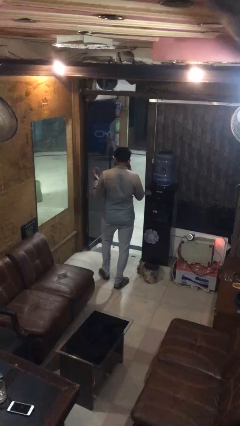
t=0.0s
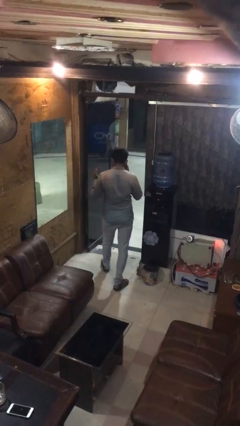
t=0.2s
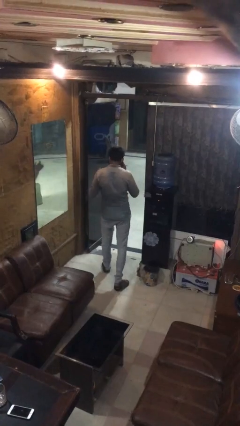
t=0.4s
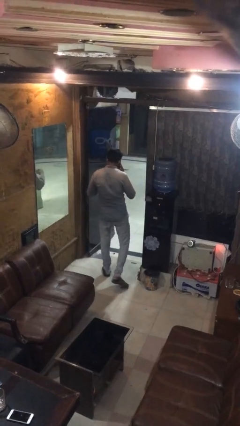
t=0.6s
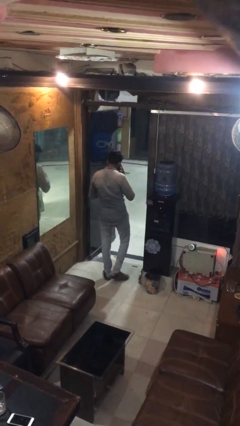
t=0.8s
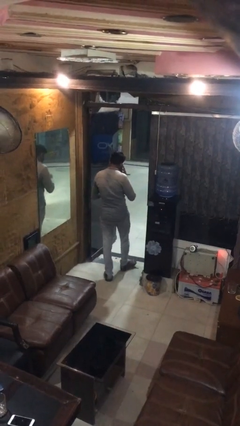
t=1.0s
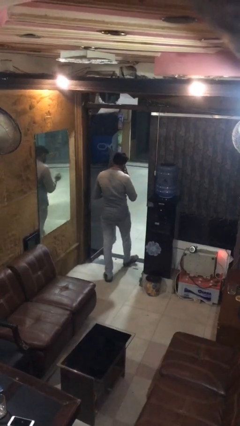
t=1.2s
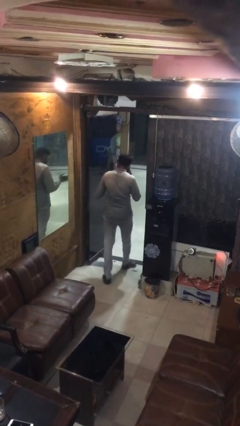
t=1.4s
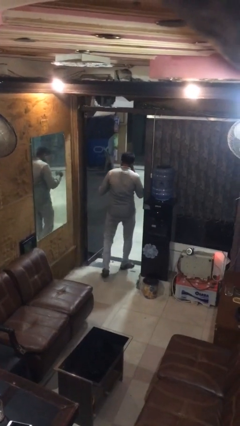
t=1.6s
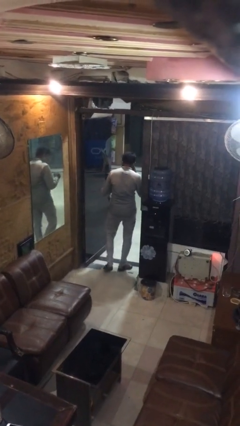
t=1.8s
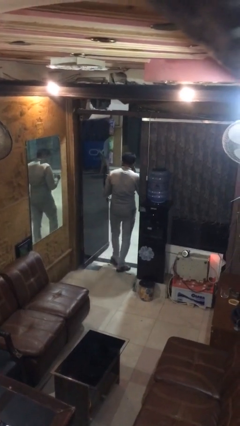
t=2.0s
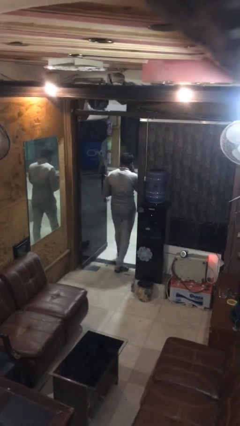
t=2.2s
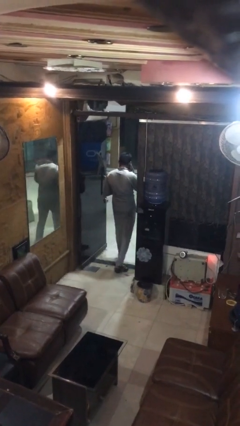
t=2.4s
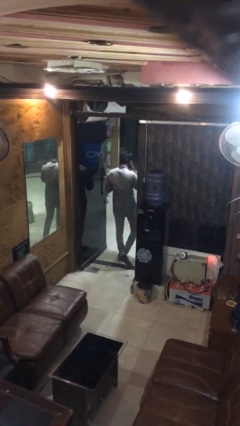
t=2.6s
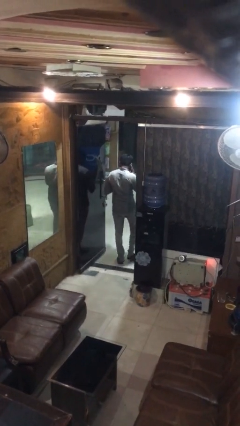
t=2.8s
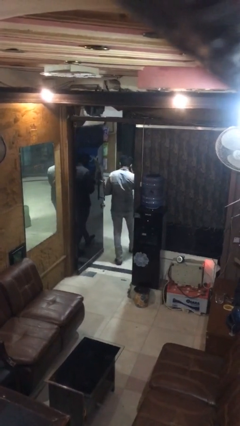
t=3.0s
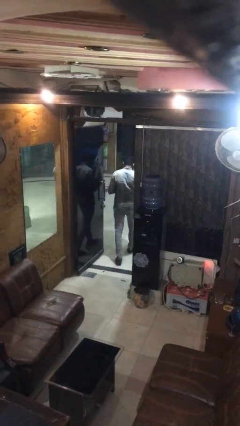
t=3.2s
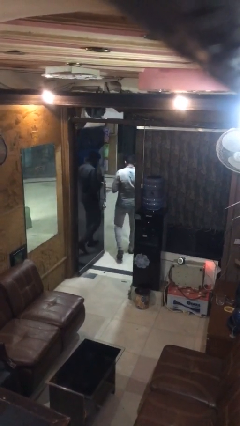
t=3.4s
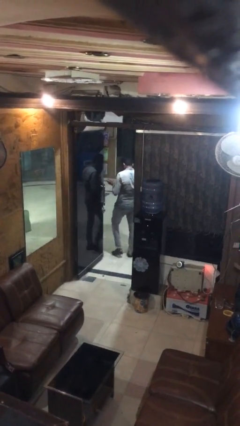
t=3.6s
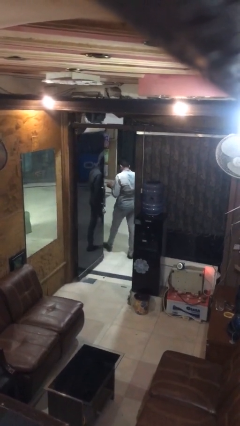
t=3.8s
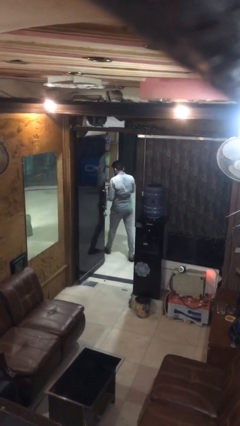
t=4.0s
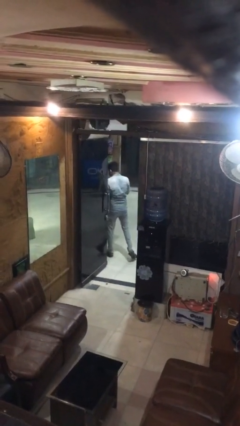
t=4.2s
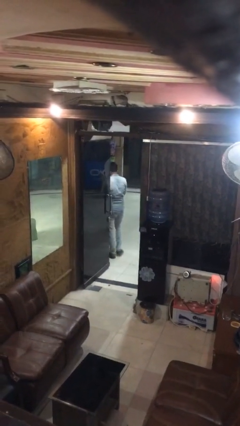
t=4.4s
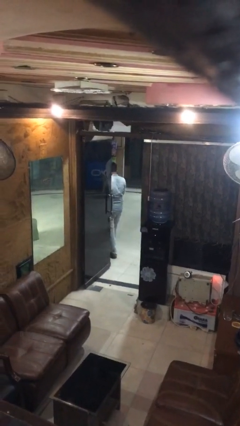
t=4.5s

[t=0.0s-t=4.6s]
person exits scene through structure

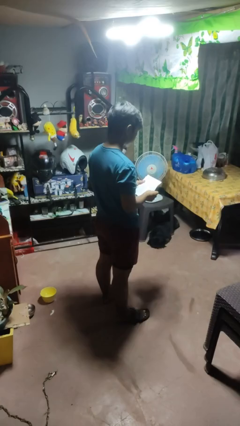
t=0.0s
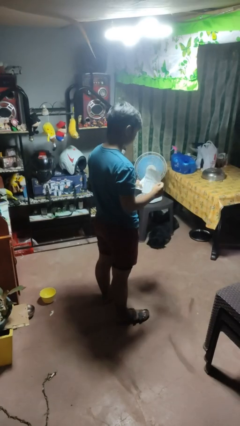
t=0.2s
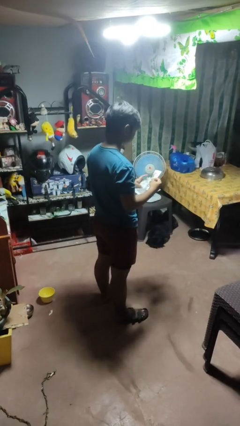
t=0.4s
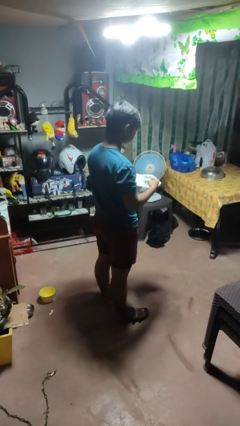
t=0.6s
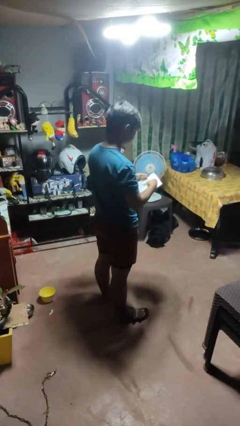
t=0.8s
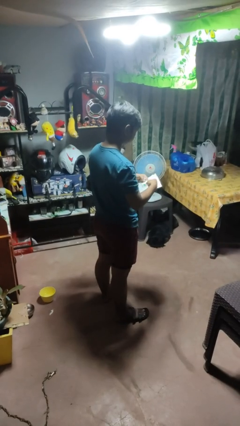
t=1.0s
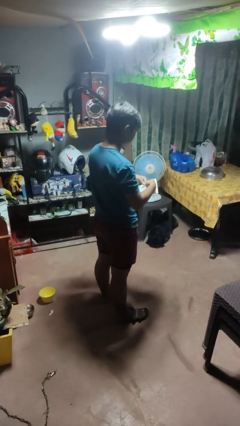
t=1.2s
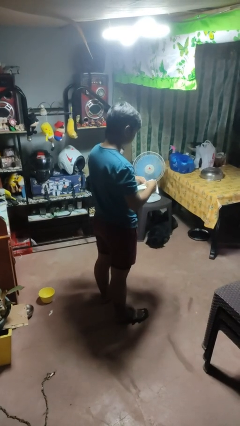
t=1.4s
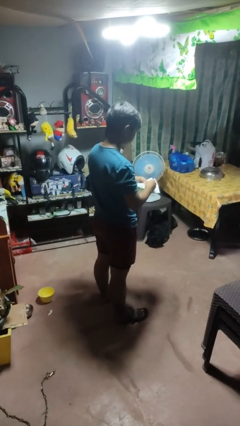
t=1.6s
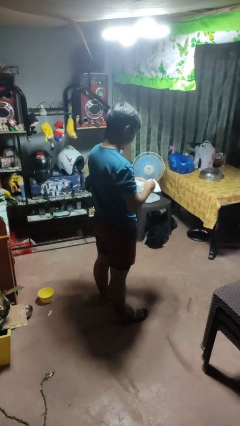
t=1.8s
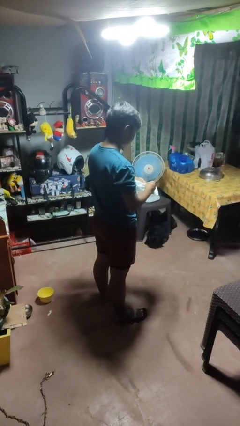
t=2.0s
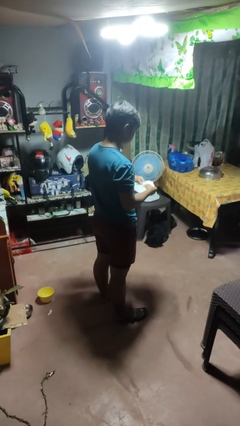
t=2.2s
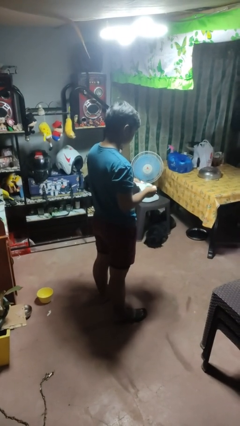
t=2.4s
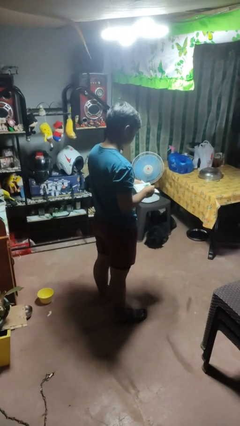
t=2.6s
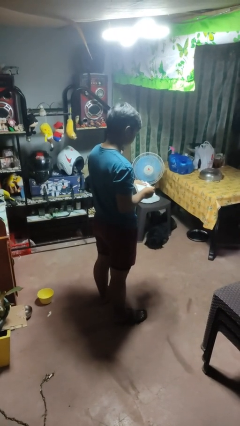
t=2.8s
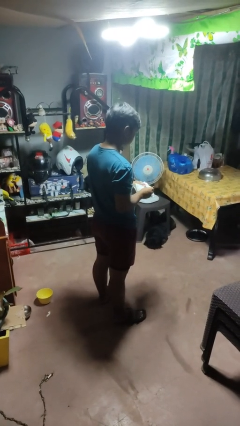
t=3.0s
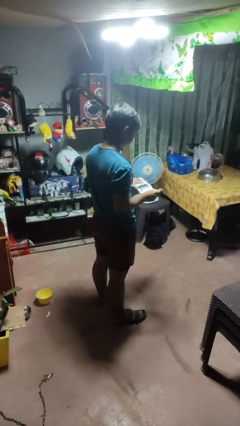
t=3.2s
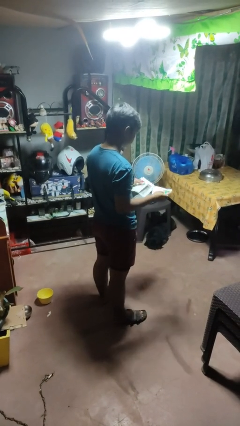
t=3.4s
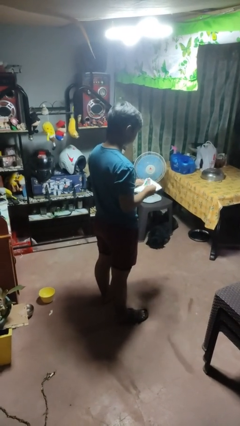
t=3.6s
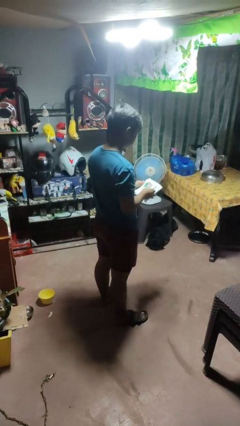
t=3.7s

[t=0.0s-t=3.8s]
person tears paper

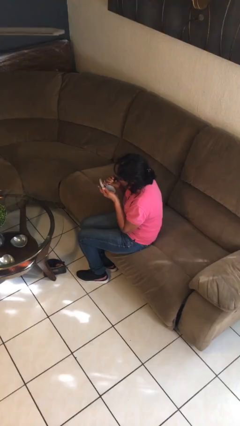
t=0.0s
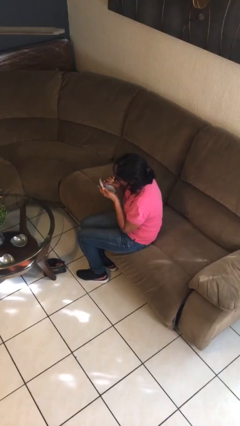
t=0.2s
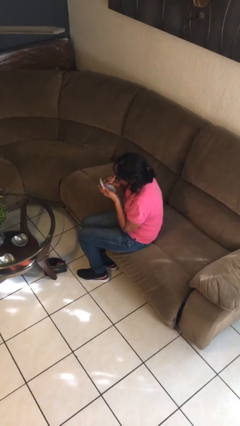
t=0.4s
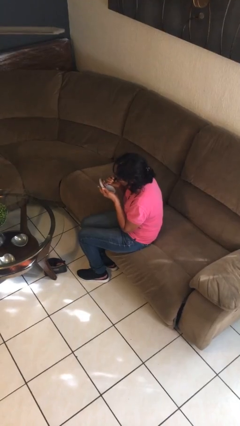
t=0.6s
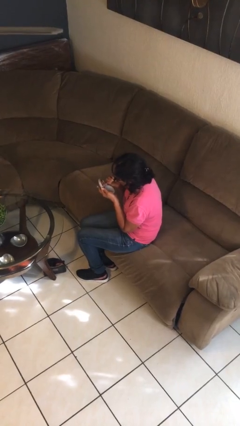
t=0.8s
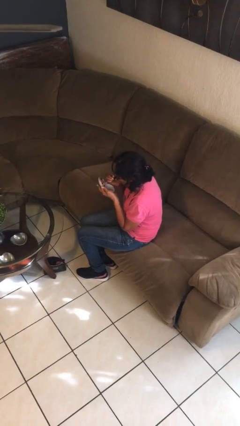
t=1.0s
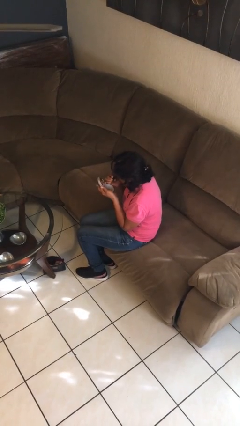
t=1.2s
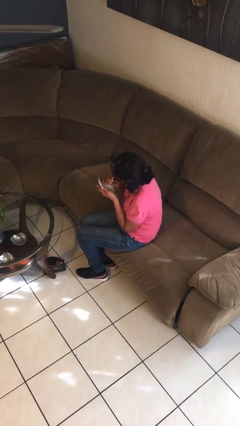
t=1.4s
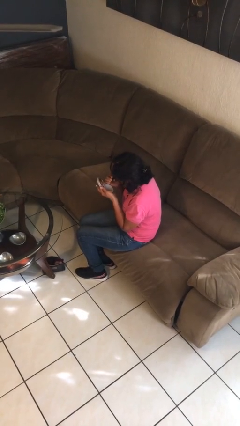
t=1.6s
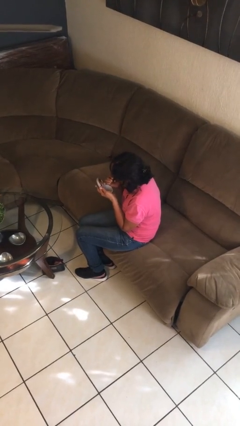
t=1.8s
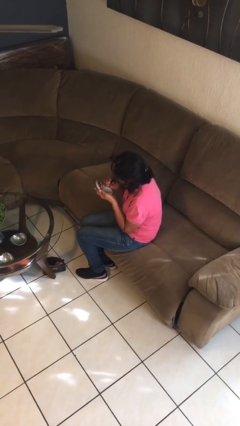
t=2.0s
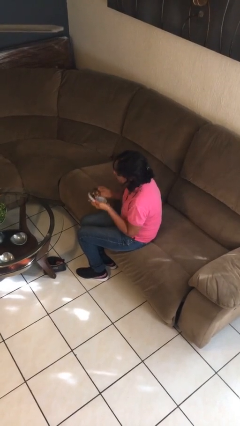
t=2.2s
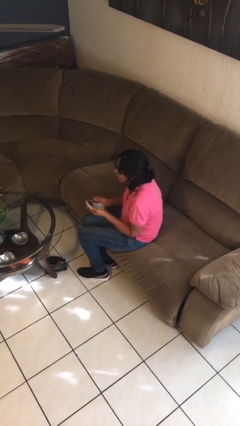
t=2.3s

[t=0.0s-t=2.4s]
person applies lip makeup

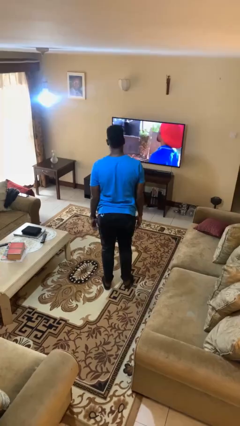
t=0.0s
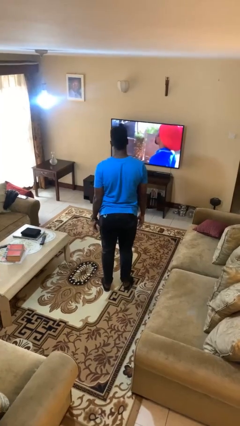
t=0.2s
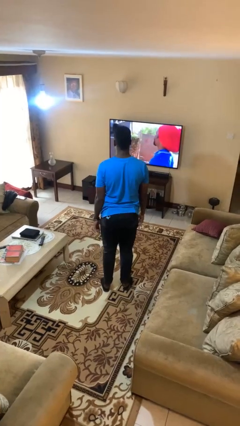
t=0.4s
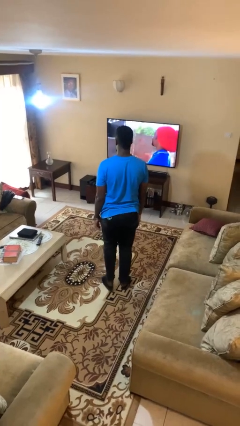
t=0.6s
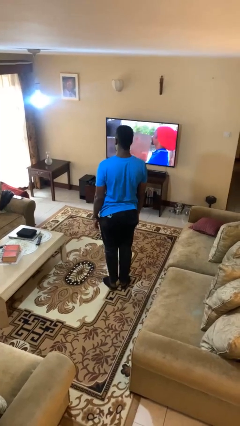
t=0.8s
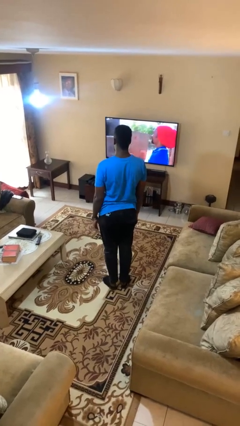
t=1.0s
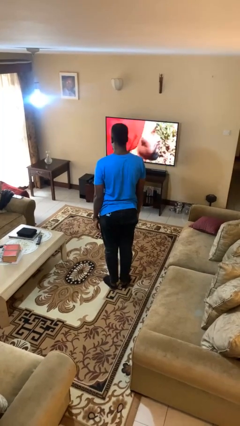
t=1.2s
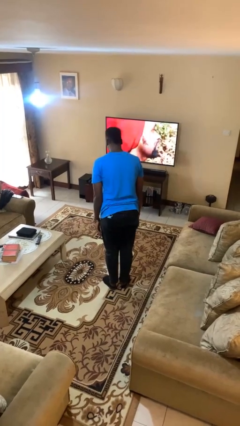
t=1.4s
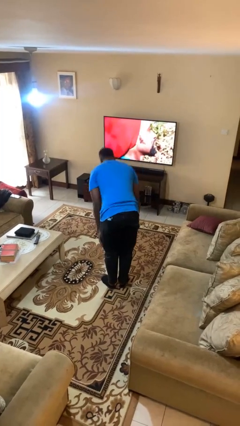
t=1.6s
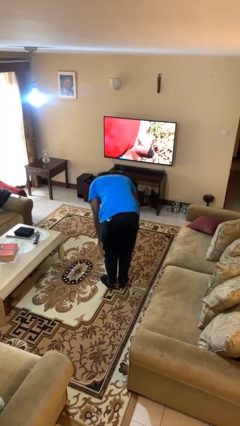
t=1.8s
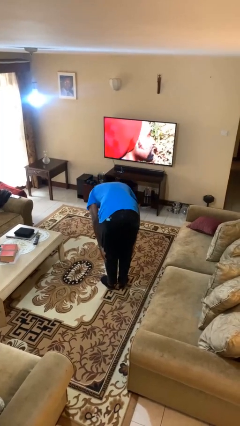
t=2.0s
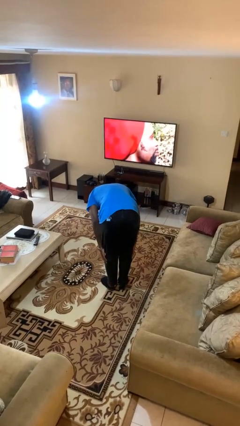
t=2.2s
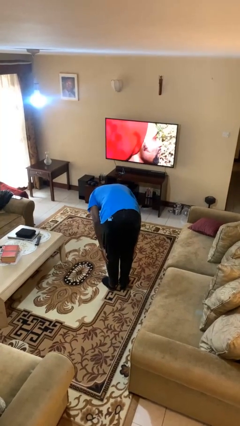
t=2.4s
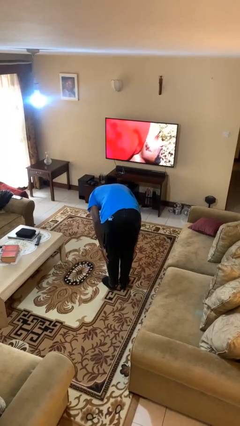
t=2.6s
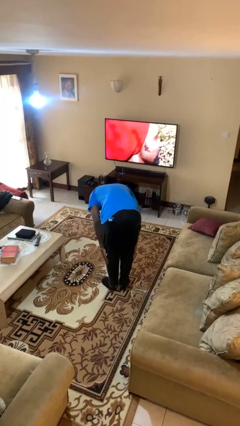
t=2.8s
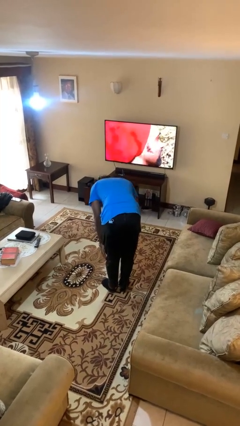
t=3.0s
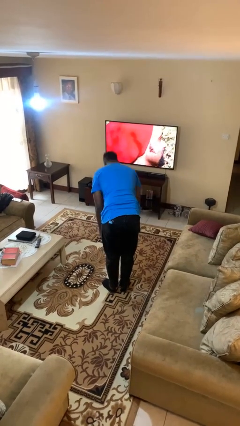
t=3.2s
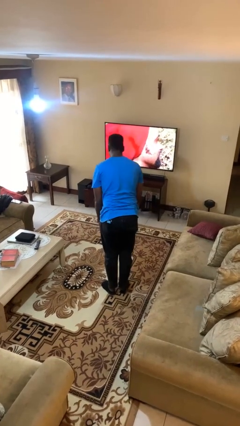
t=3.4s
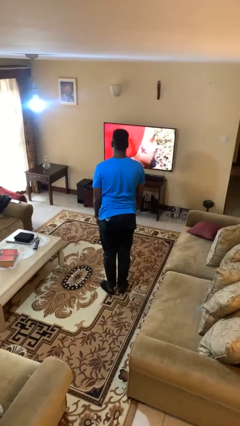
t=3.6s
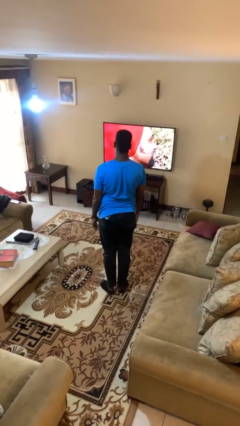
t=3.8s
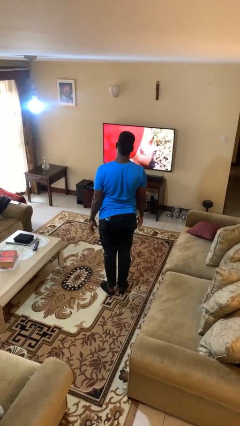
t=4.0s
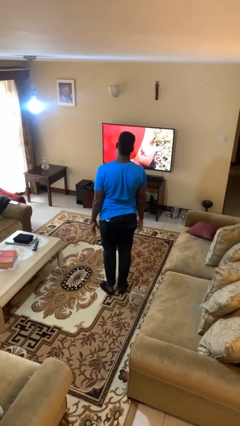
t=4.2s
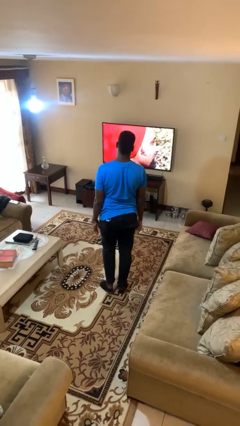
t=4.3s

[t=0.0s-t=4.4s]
person bows

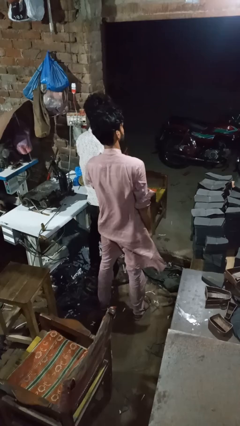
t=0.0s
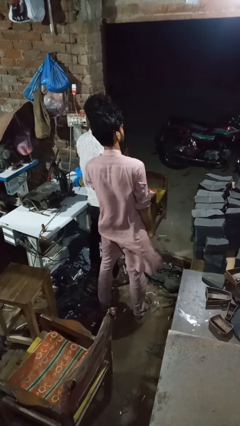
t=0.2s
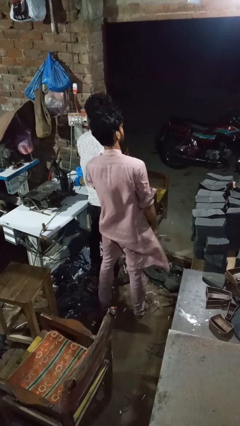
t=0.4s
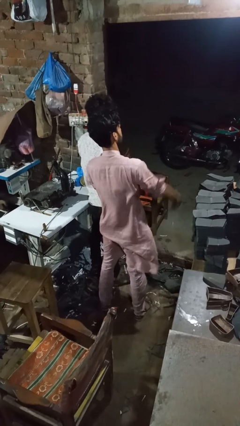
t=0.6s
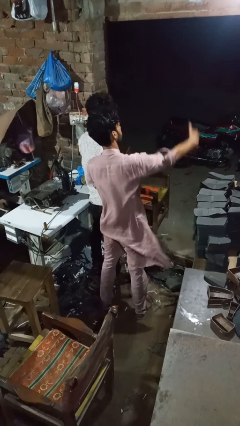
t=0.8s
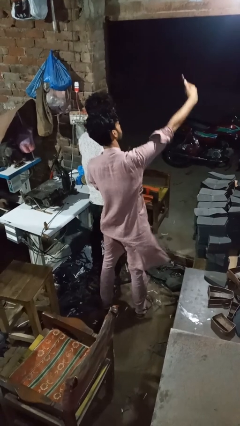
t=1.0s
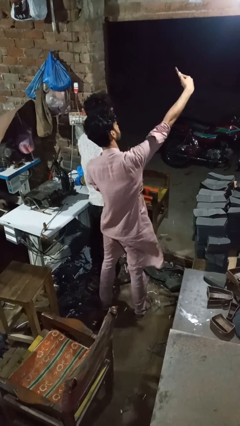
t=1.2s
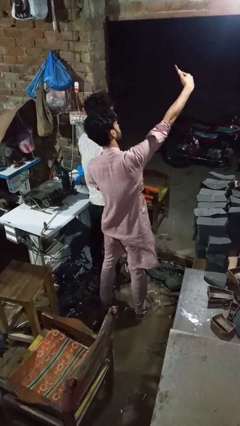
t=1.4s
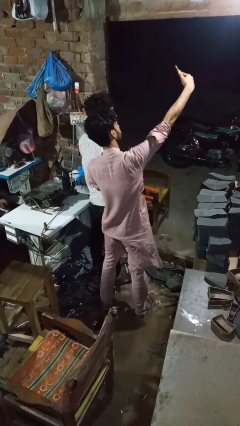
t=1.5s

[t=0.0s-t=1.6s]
person tickles person

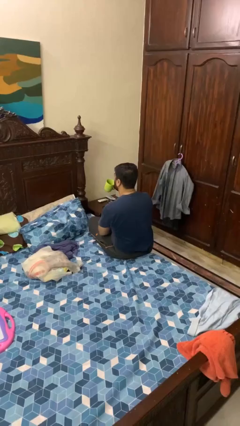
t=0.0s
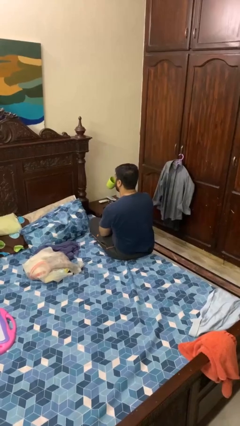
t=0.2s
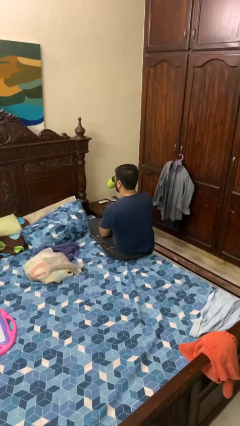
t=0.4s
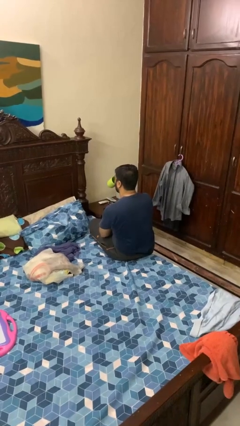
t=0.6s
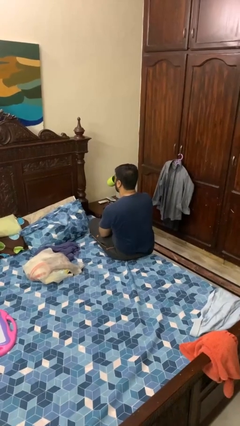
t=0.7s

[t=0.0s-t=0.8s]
person drinks from mug
